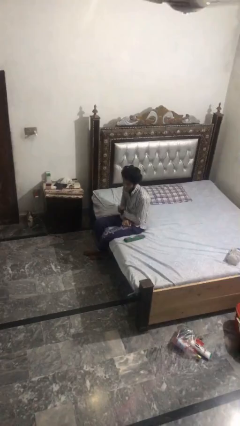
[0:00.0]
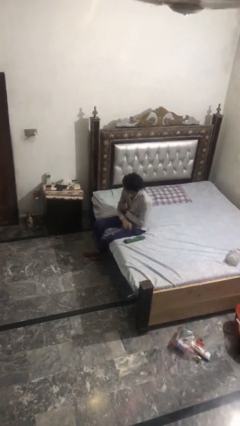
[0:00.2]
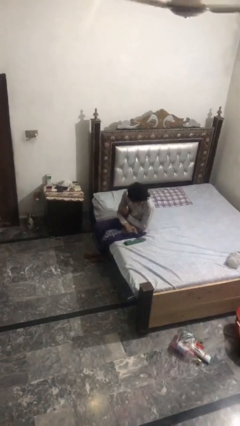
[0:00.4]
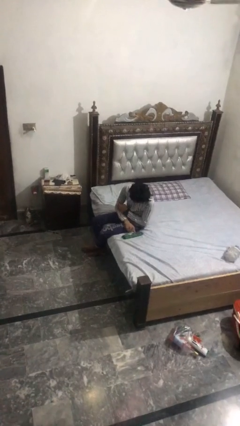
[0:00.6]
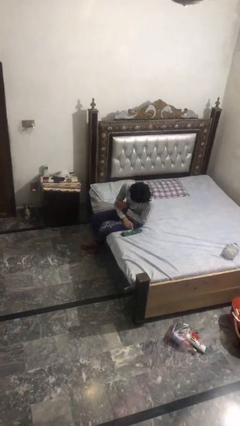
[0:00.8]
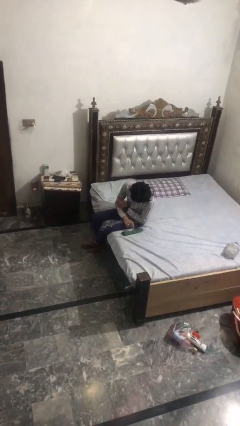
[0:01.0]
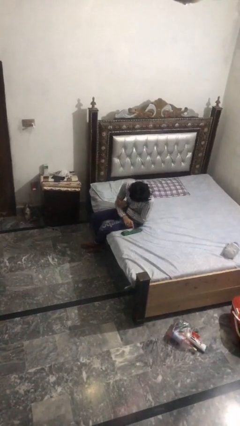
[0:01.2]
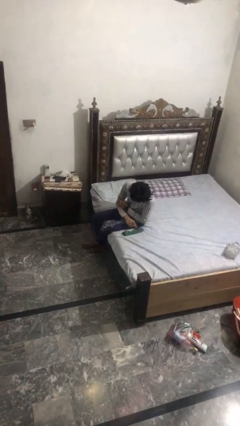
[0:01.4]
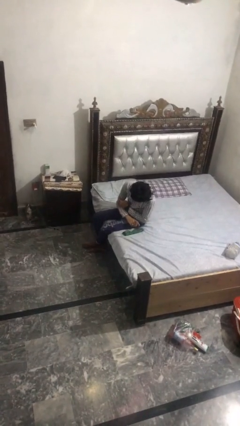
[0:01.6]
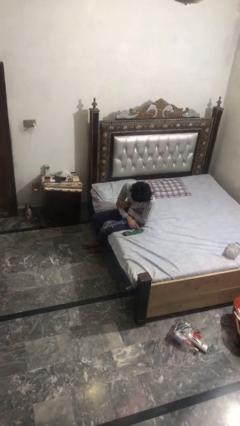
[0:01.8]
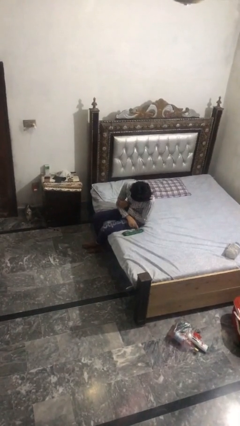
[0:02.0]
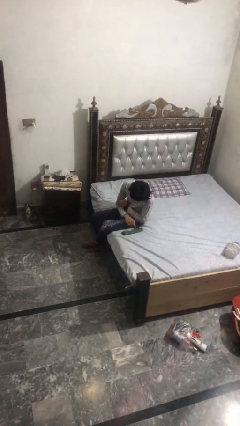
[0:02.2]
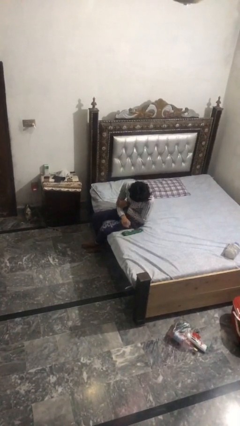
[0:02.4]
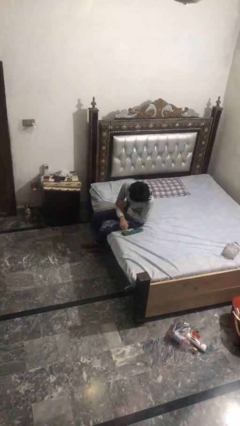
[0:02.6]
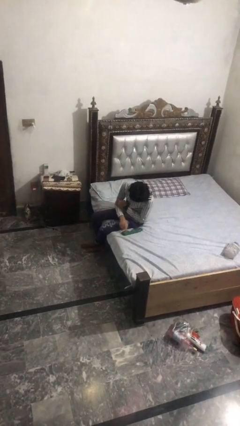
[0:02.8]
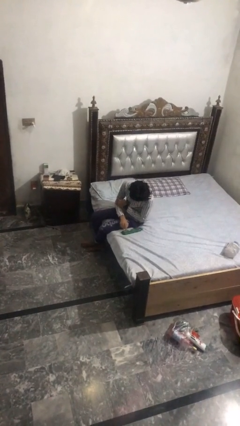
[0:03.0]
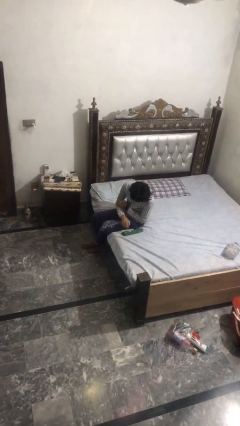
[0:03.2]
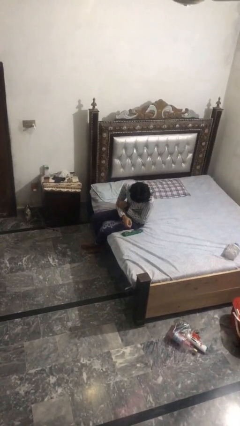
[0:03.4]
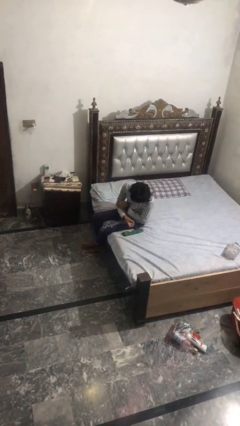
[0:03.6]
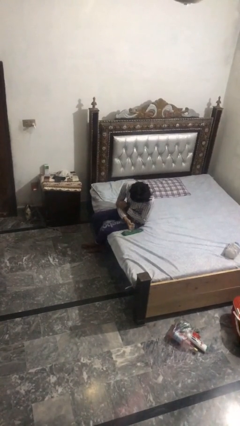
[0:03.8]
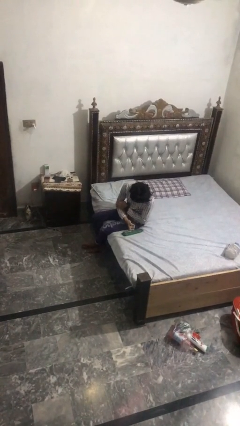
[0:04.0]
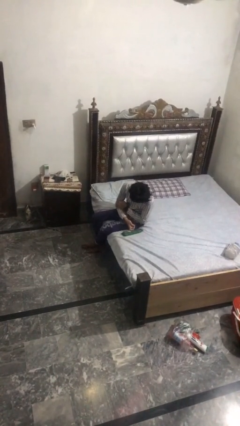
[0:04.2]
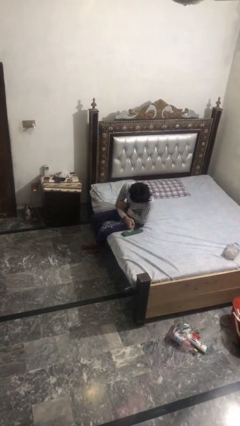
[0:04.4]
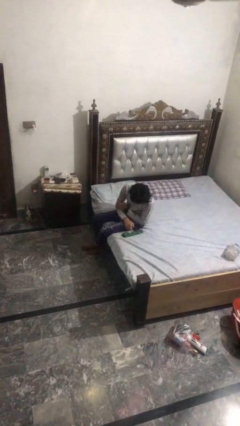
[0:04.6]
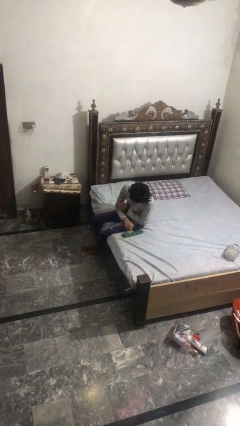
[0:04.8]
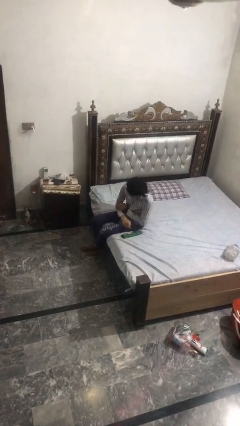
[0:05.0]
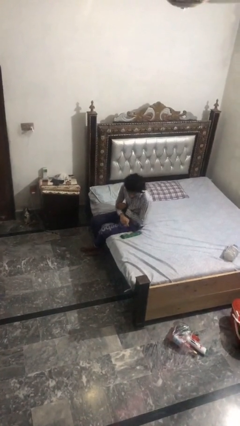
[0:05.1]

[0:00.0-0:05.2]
person taps object with finger

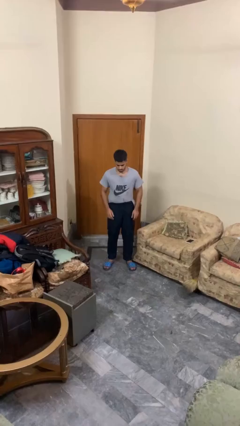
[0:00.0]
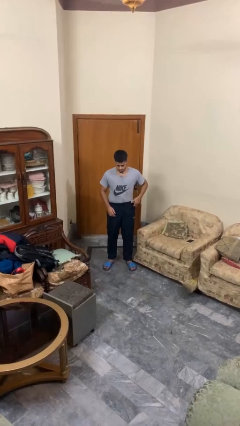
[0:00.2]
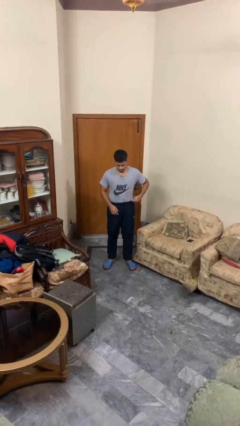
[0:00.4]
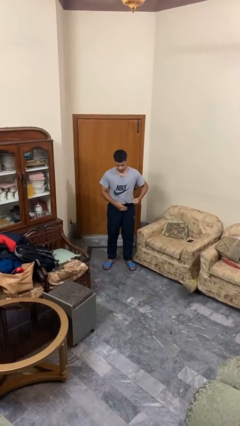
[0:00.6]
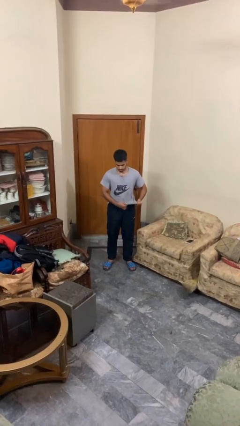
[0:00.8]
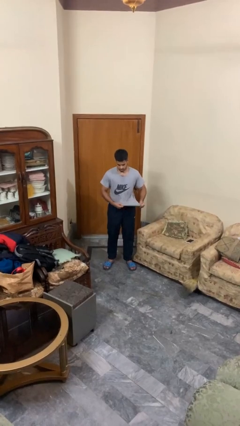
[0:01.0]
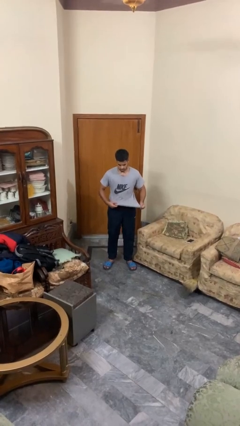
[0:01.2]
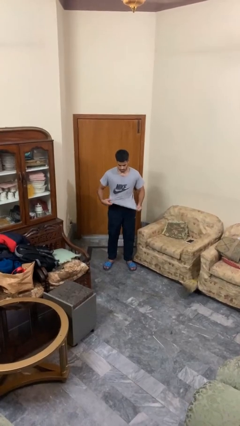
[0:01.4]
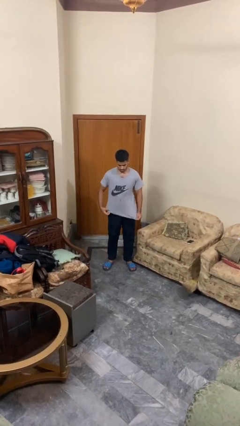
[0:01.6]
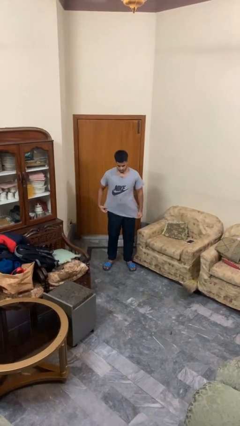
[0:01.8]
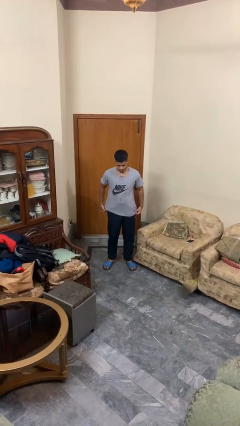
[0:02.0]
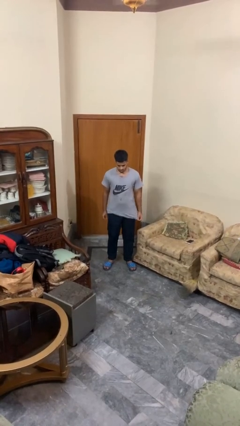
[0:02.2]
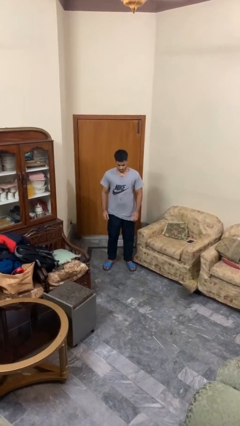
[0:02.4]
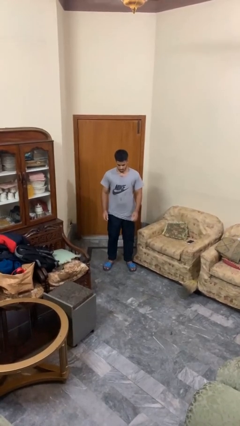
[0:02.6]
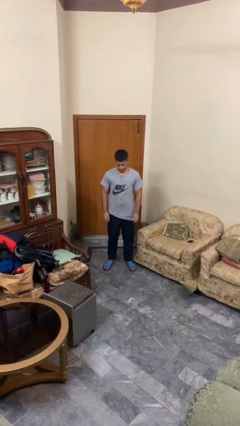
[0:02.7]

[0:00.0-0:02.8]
person untucks shirt

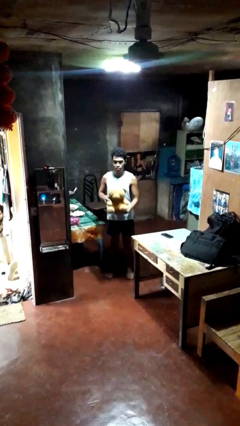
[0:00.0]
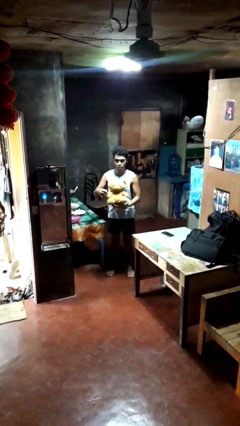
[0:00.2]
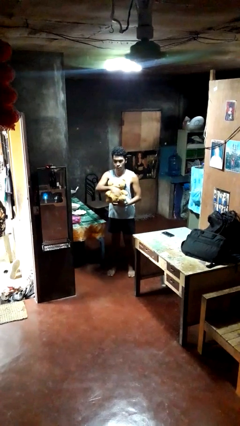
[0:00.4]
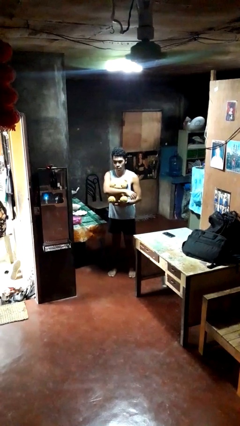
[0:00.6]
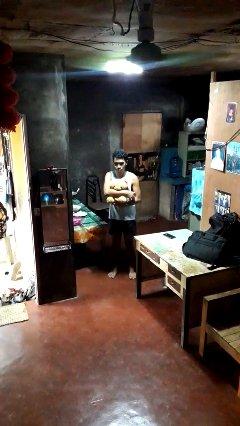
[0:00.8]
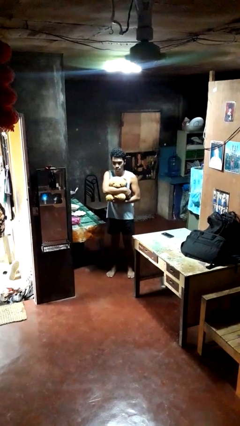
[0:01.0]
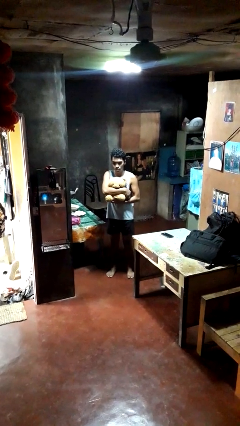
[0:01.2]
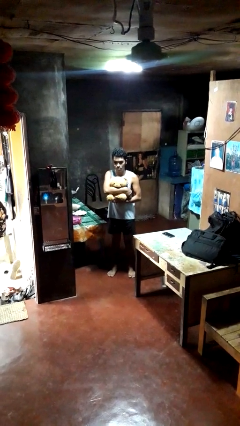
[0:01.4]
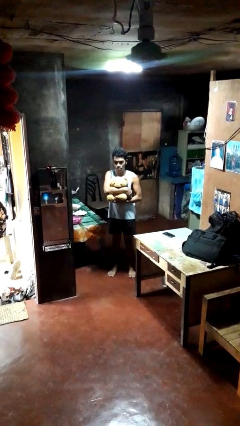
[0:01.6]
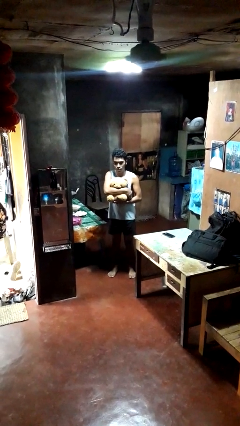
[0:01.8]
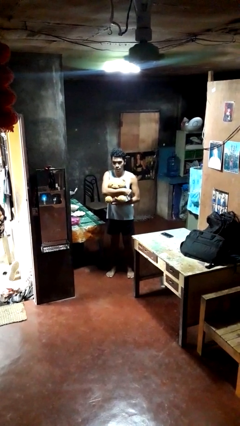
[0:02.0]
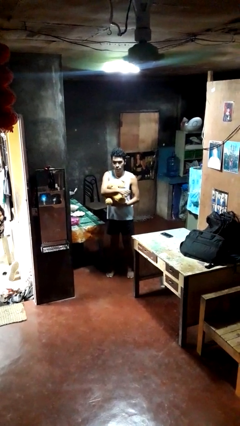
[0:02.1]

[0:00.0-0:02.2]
person hugs stuffed animal

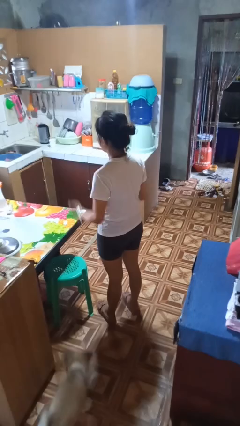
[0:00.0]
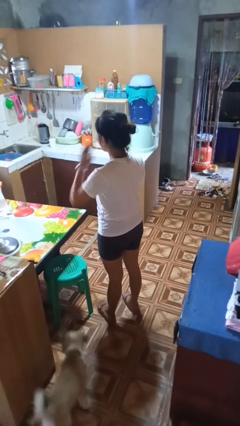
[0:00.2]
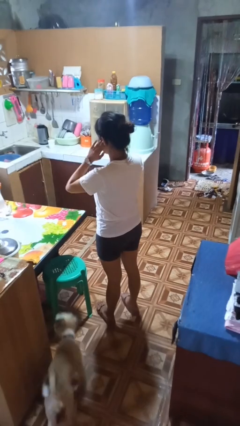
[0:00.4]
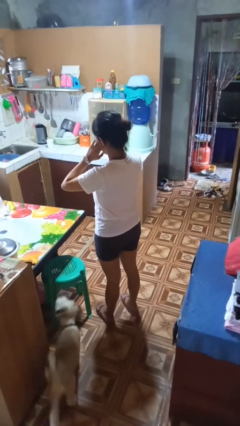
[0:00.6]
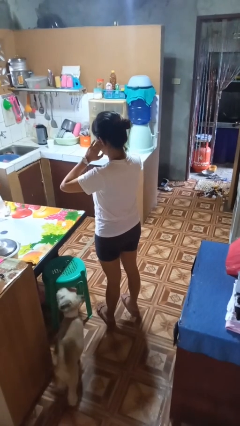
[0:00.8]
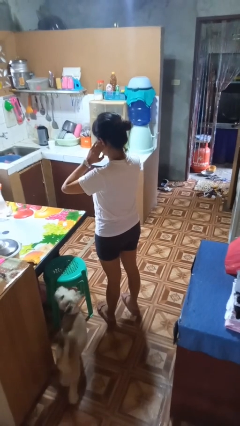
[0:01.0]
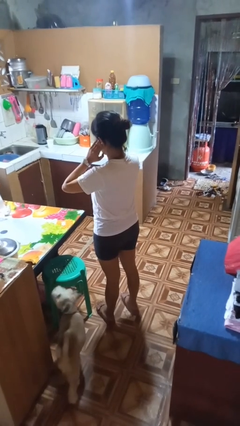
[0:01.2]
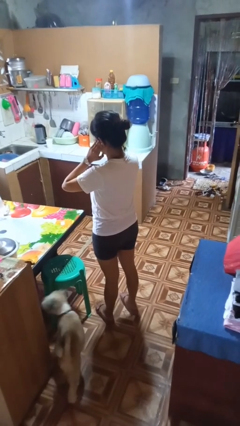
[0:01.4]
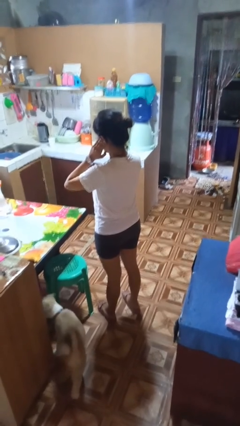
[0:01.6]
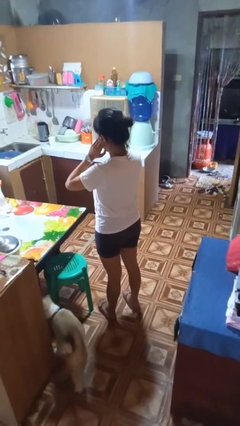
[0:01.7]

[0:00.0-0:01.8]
person puts fingers in ear

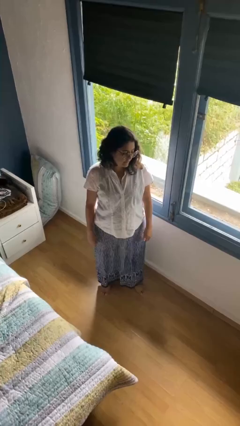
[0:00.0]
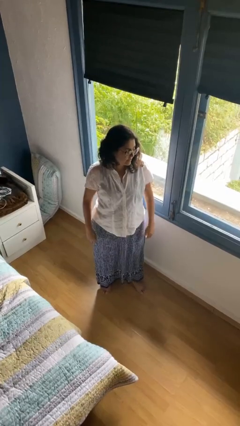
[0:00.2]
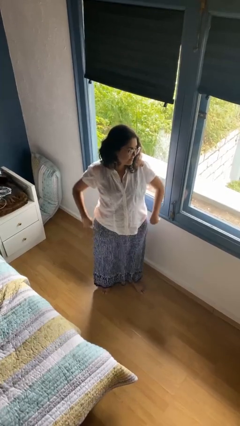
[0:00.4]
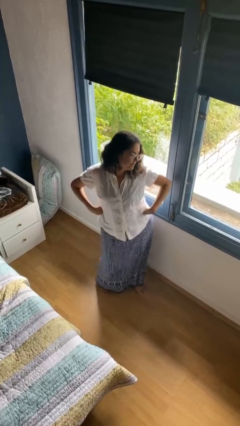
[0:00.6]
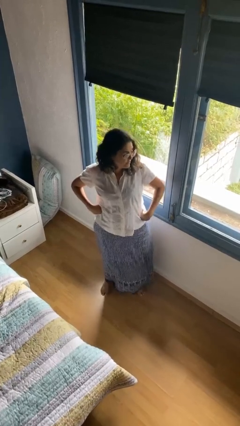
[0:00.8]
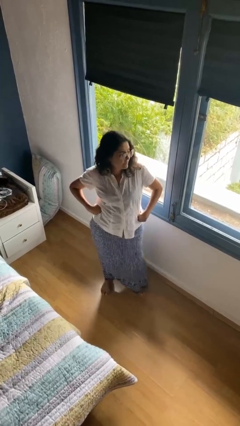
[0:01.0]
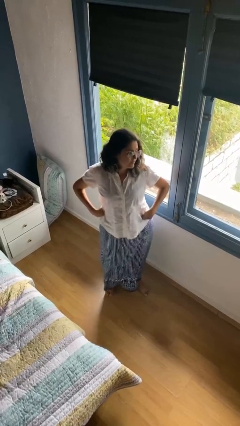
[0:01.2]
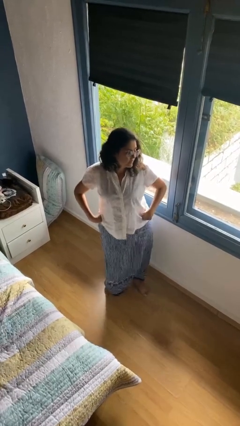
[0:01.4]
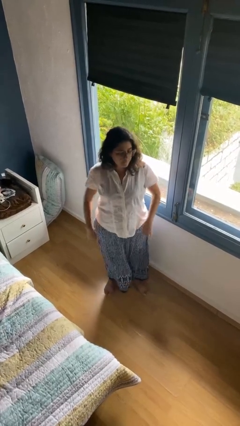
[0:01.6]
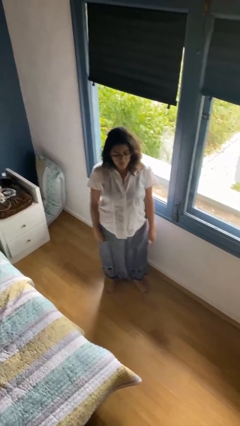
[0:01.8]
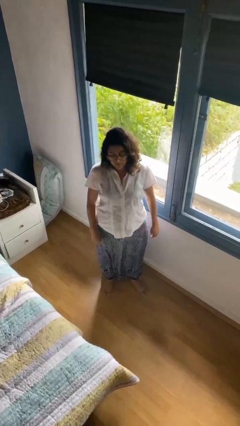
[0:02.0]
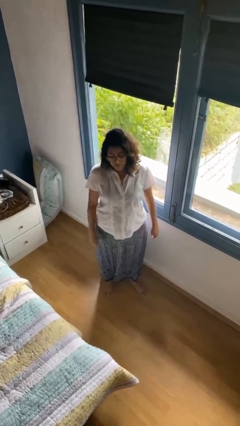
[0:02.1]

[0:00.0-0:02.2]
person wiggles hips

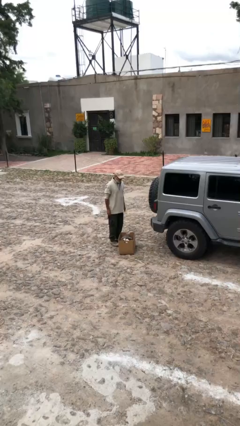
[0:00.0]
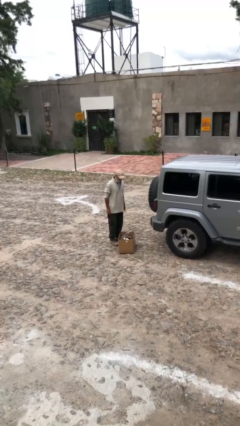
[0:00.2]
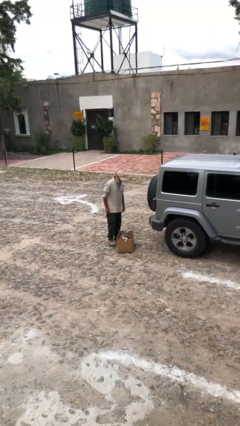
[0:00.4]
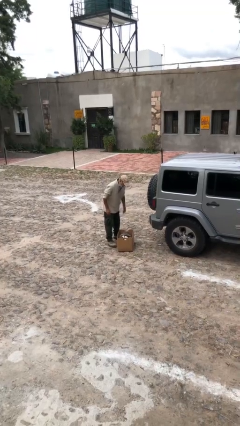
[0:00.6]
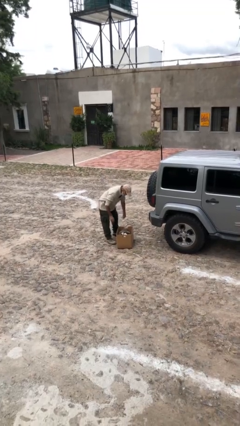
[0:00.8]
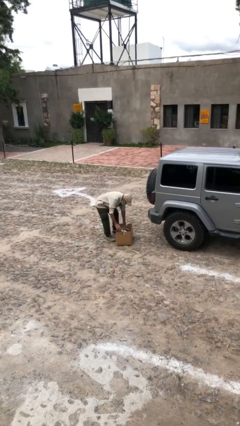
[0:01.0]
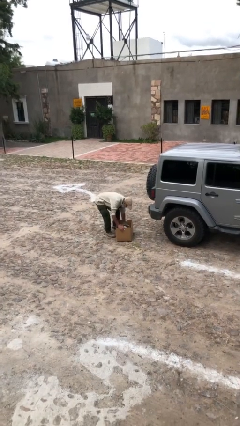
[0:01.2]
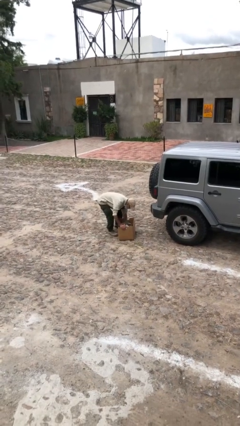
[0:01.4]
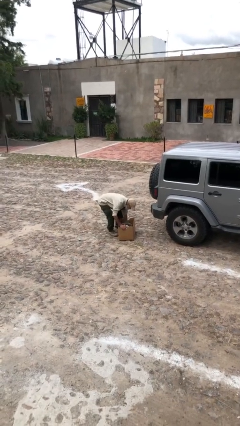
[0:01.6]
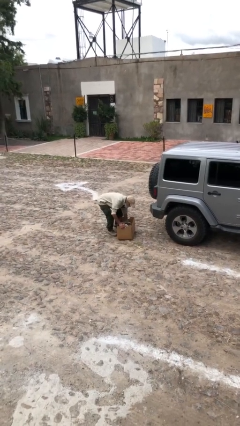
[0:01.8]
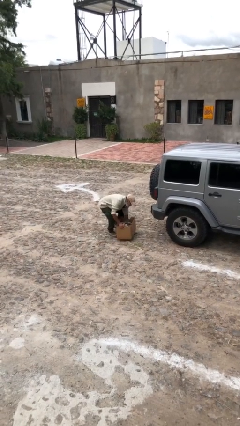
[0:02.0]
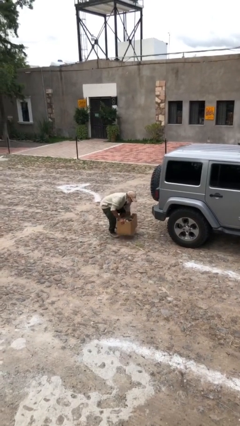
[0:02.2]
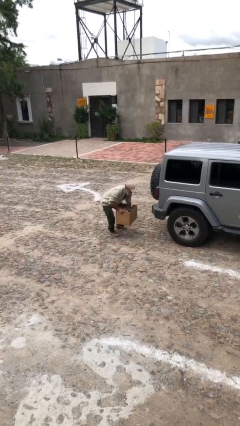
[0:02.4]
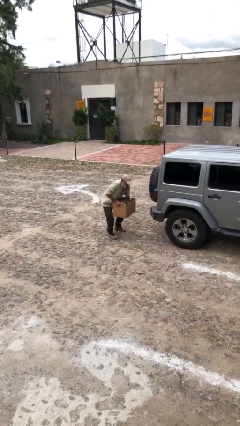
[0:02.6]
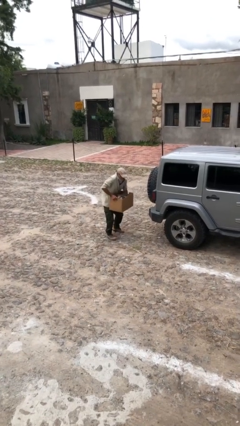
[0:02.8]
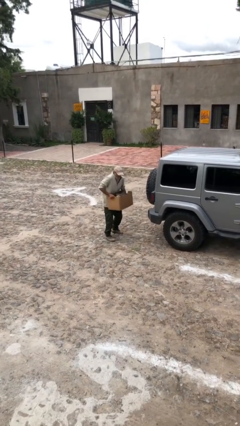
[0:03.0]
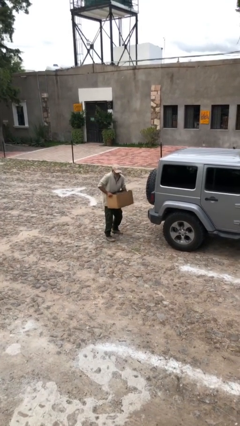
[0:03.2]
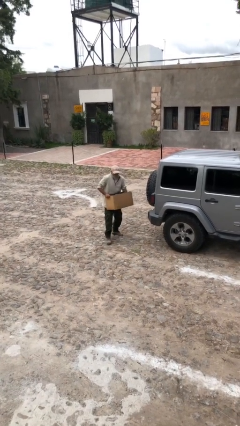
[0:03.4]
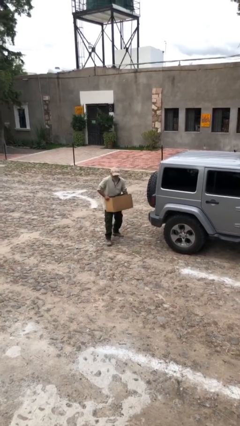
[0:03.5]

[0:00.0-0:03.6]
person picks up object from floor

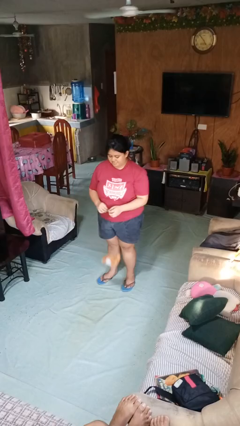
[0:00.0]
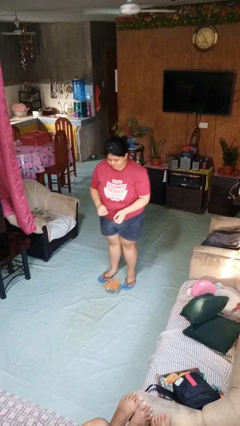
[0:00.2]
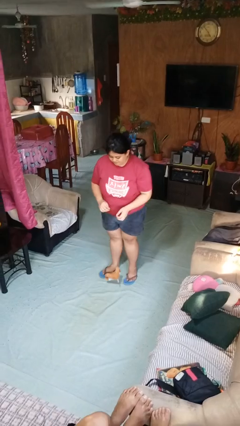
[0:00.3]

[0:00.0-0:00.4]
person drops object
